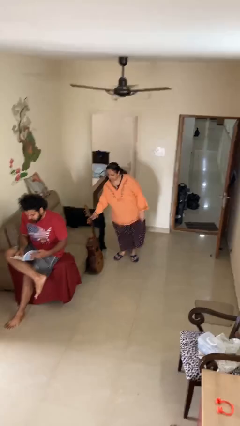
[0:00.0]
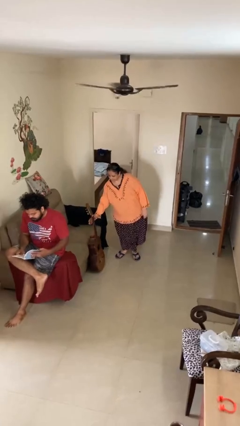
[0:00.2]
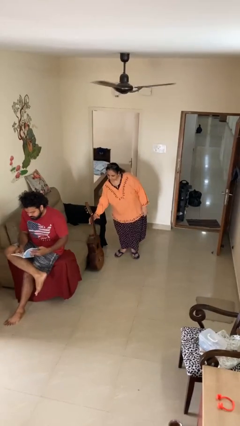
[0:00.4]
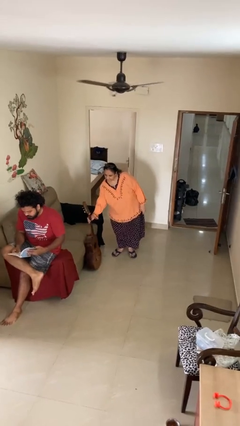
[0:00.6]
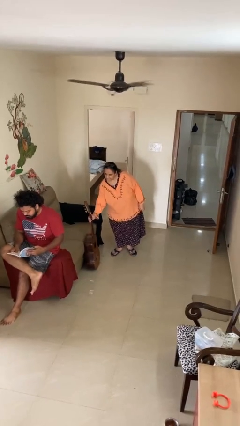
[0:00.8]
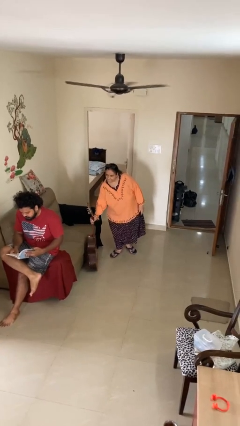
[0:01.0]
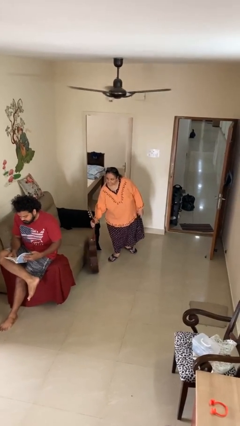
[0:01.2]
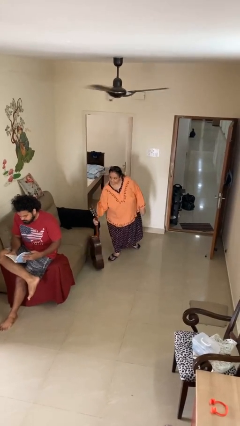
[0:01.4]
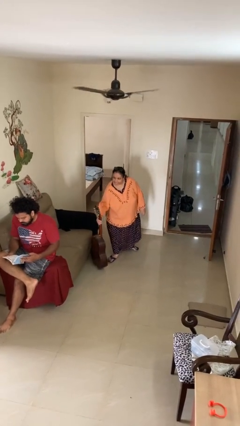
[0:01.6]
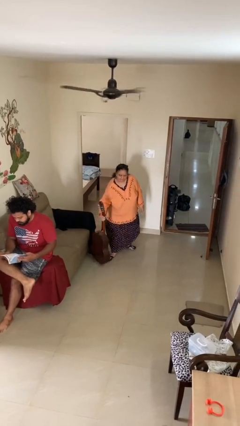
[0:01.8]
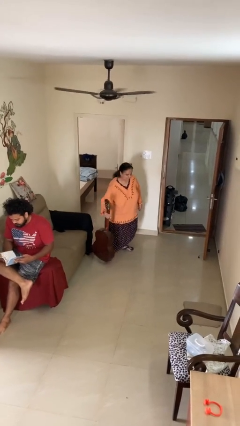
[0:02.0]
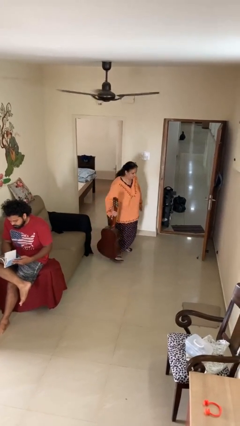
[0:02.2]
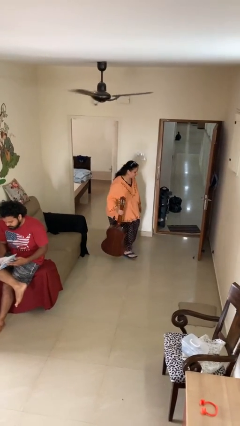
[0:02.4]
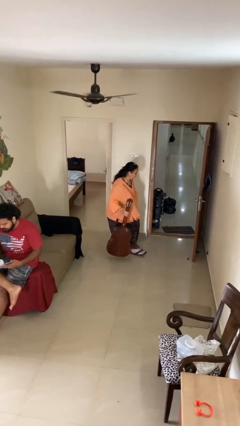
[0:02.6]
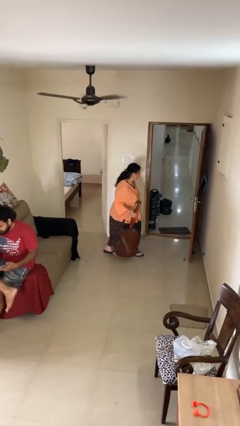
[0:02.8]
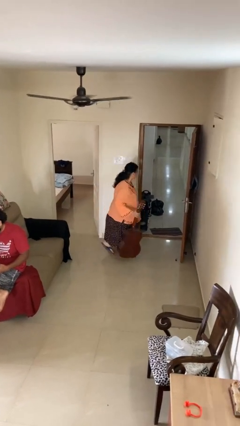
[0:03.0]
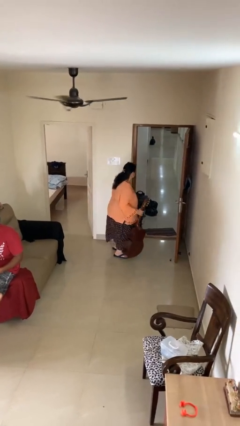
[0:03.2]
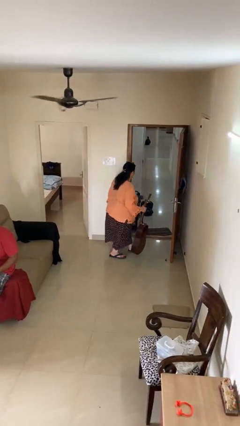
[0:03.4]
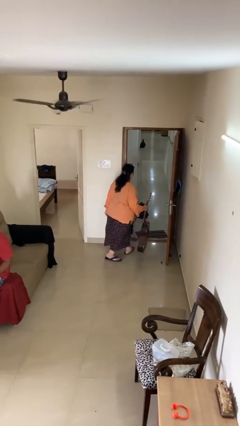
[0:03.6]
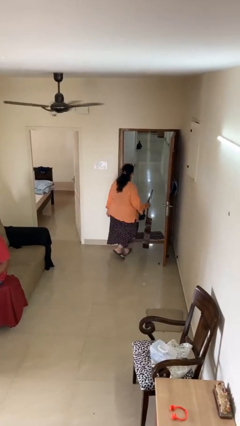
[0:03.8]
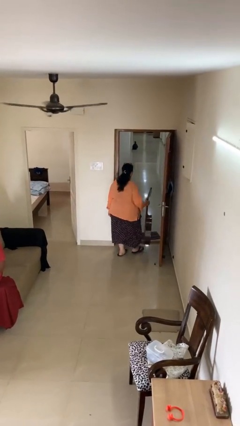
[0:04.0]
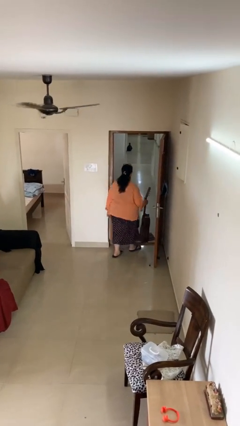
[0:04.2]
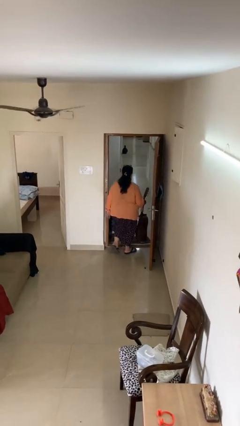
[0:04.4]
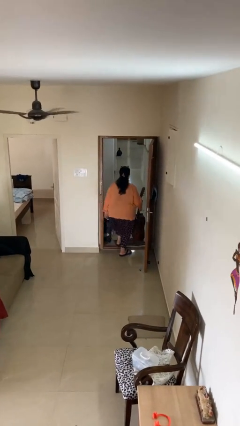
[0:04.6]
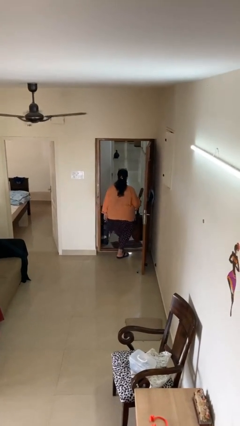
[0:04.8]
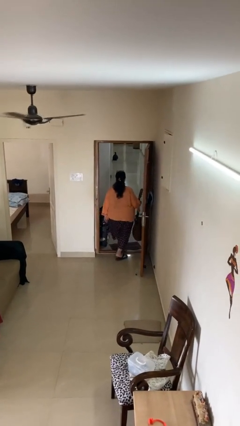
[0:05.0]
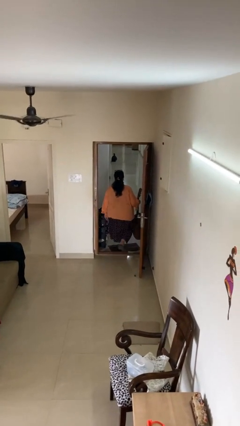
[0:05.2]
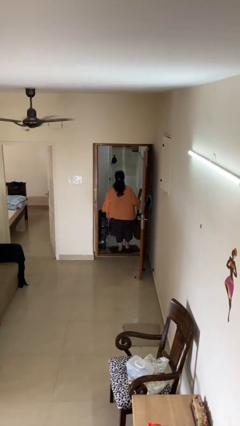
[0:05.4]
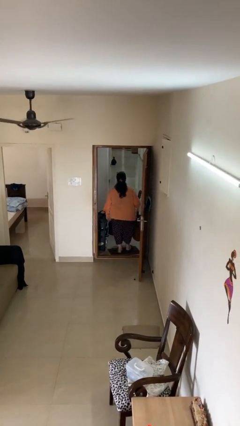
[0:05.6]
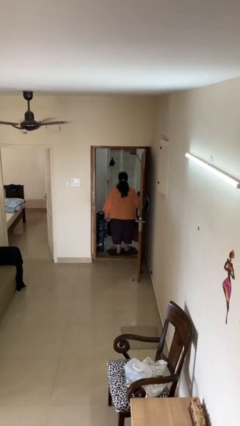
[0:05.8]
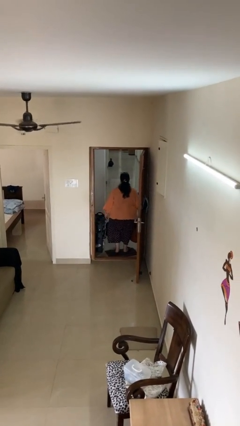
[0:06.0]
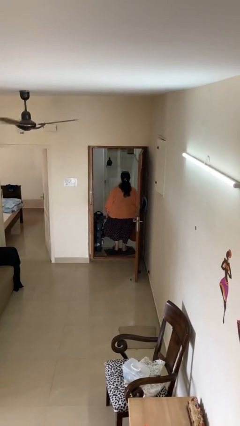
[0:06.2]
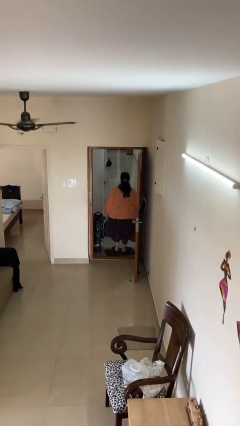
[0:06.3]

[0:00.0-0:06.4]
person steals object from person

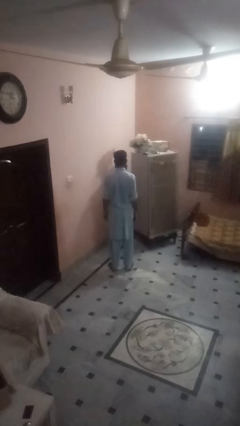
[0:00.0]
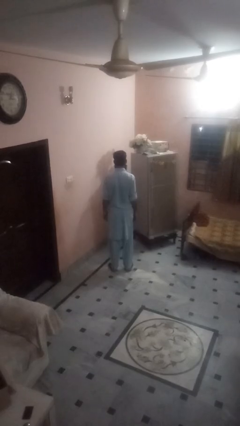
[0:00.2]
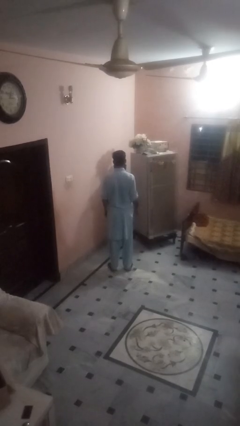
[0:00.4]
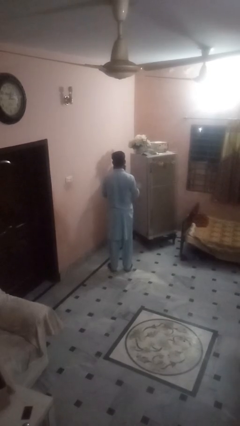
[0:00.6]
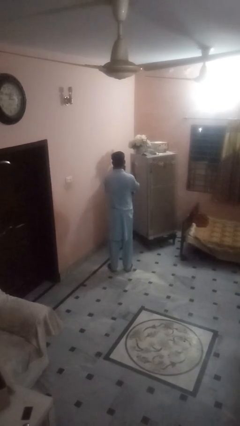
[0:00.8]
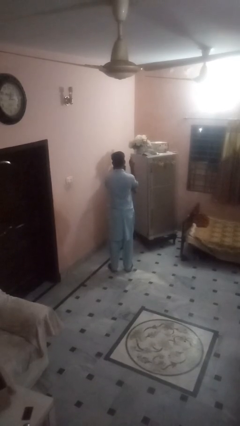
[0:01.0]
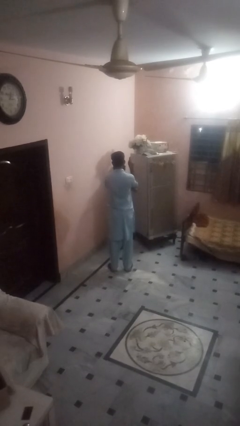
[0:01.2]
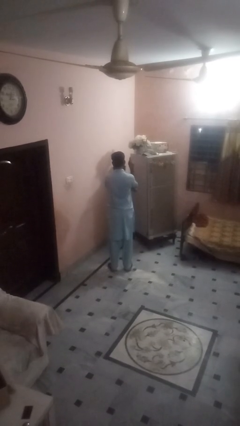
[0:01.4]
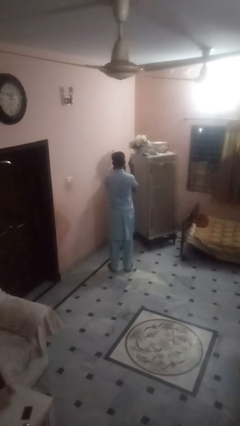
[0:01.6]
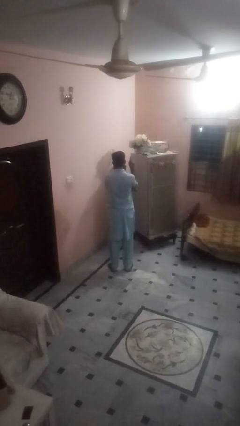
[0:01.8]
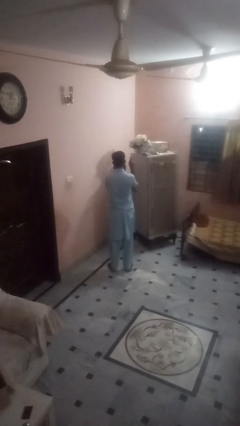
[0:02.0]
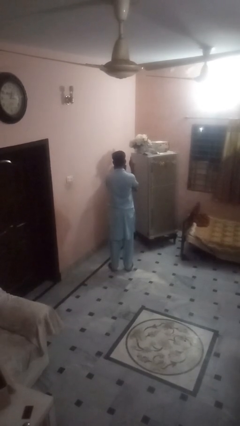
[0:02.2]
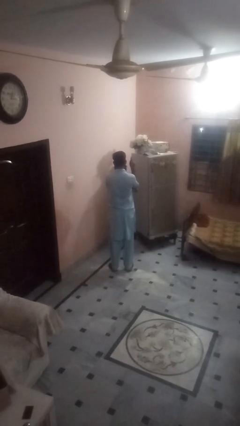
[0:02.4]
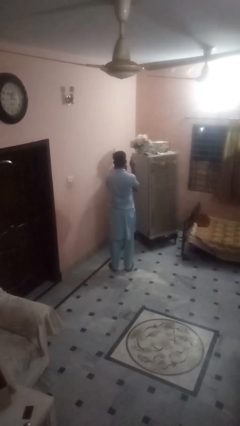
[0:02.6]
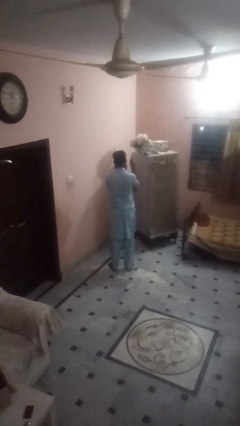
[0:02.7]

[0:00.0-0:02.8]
person gestures number one

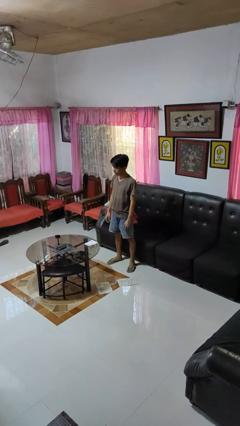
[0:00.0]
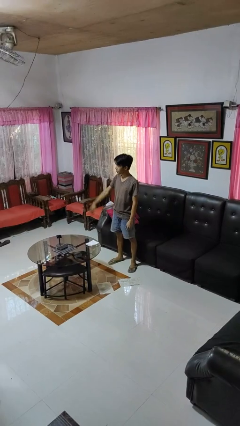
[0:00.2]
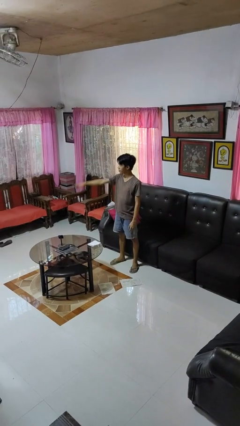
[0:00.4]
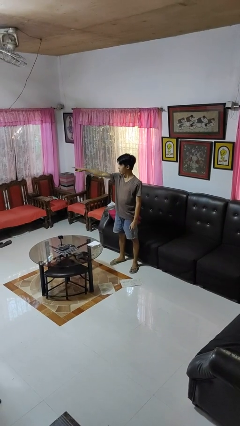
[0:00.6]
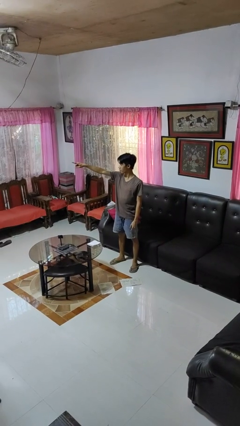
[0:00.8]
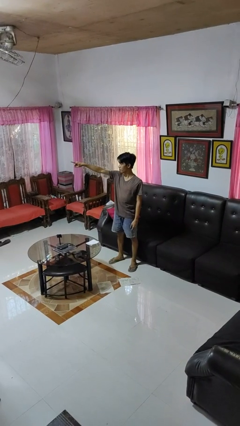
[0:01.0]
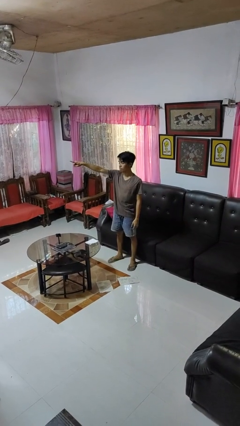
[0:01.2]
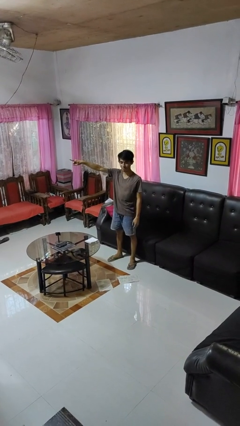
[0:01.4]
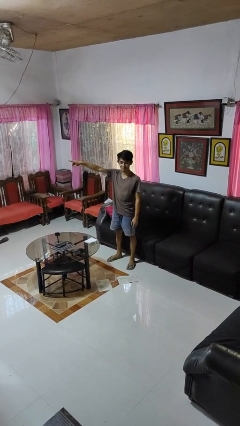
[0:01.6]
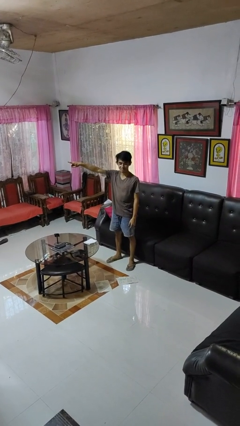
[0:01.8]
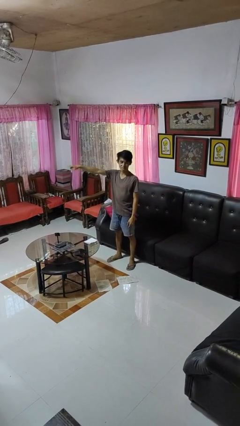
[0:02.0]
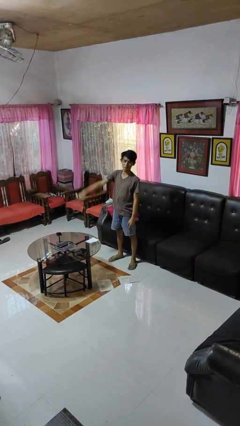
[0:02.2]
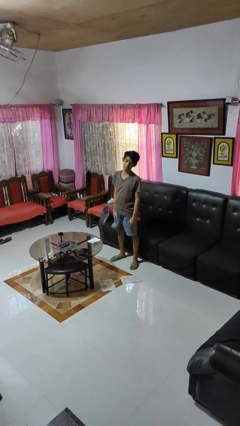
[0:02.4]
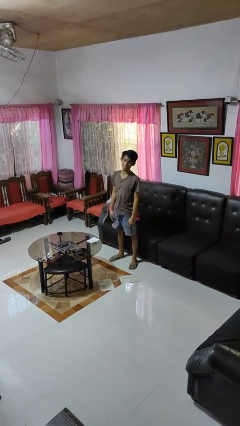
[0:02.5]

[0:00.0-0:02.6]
person points at person

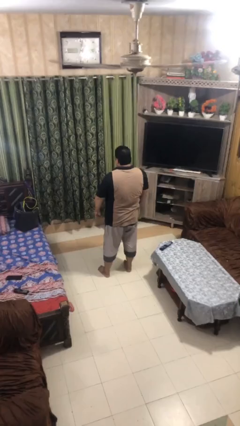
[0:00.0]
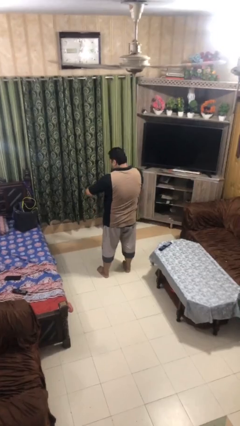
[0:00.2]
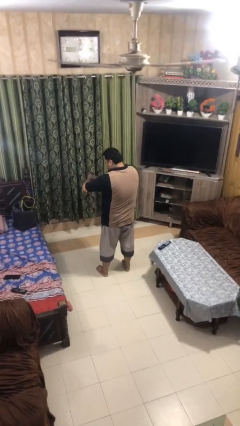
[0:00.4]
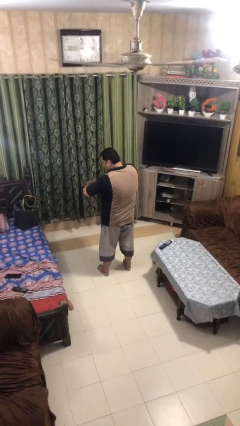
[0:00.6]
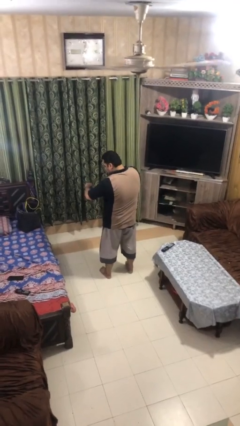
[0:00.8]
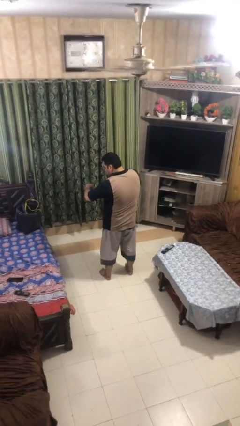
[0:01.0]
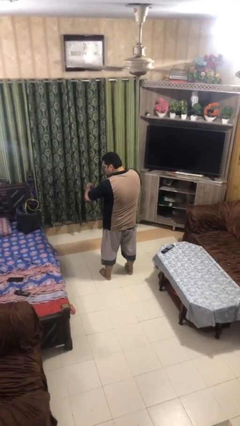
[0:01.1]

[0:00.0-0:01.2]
person swats bug

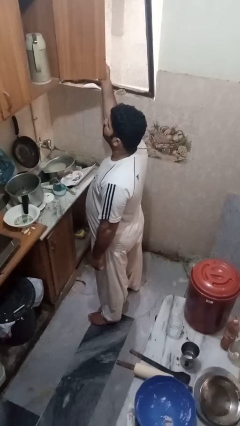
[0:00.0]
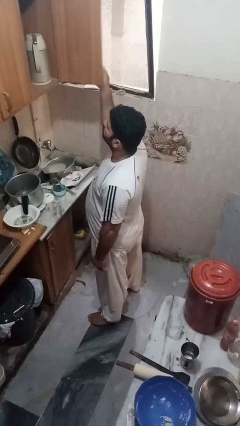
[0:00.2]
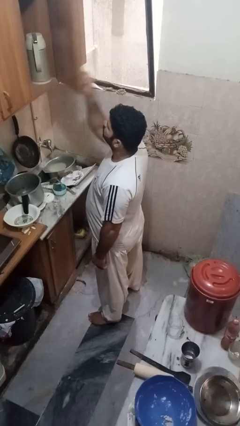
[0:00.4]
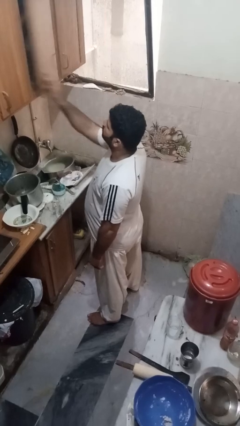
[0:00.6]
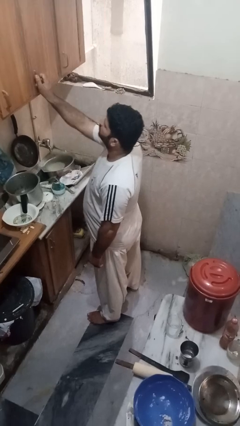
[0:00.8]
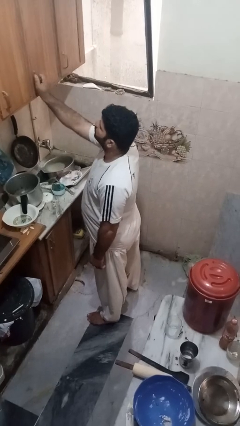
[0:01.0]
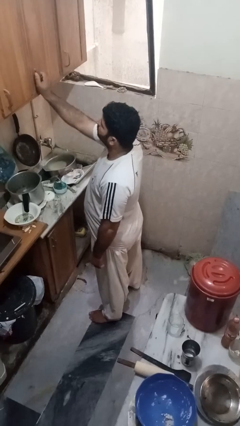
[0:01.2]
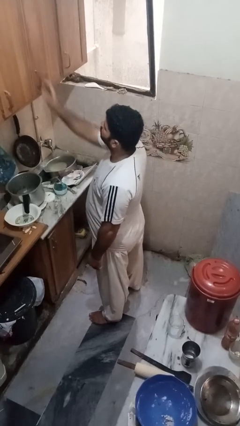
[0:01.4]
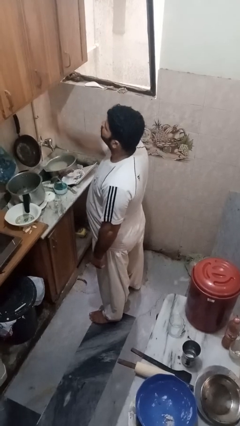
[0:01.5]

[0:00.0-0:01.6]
person closes cabinet

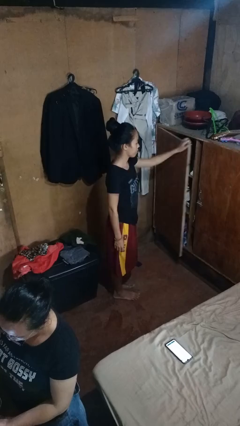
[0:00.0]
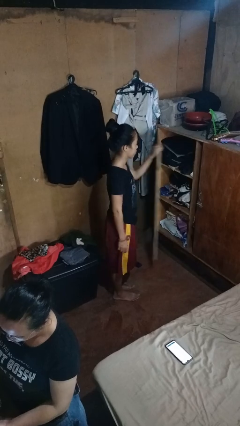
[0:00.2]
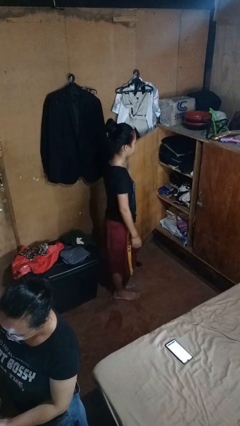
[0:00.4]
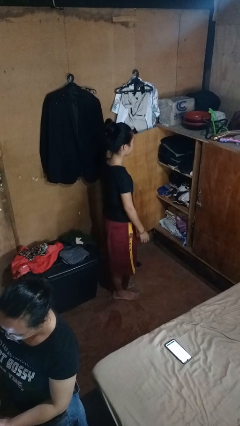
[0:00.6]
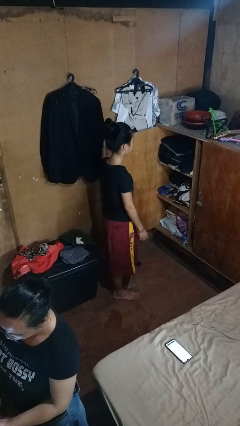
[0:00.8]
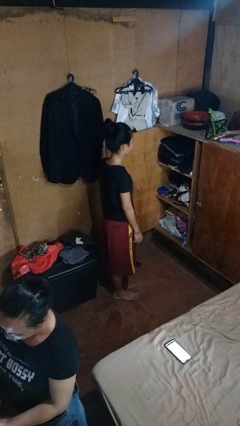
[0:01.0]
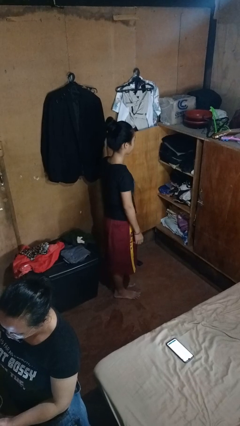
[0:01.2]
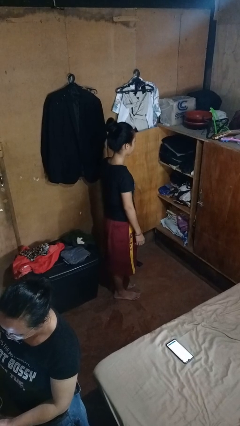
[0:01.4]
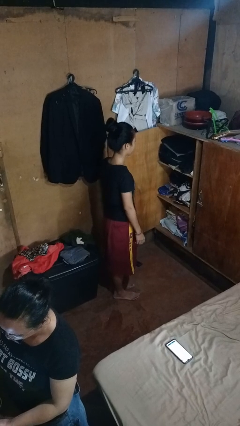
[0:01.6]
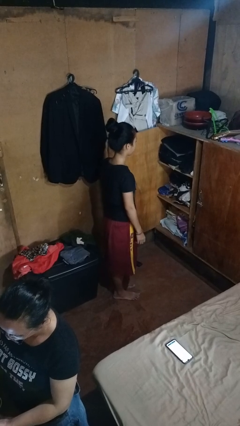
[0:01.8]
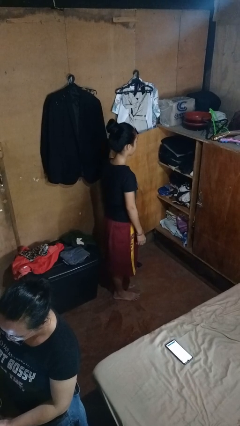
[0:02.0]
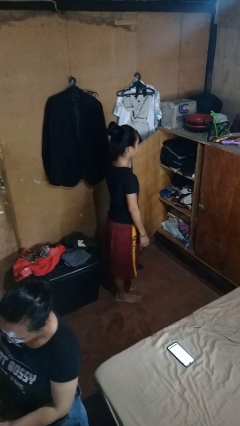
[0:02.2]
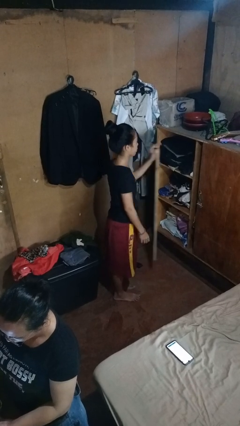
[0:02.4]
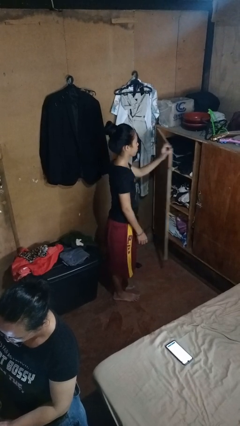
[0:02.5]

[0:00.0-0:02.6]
person opens closet door

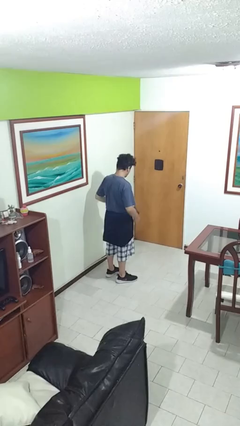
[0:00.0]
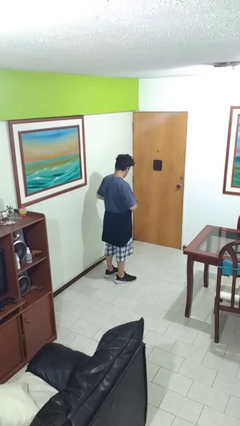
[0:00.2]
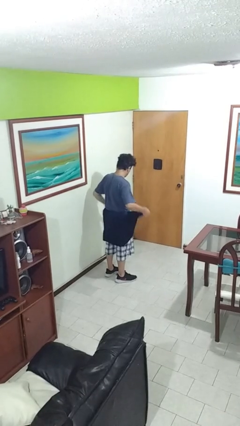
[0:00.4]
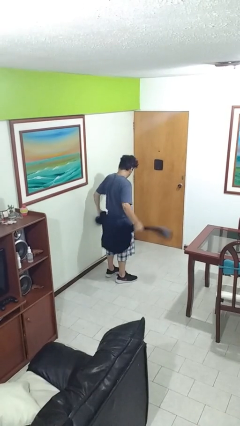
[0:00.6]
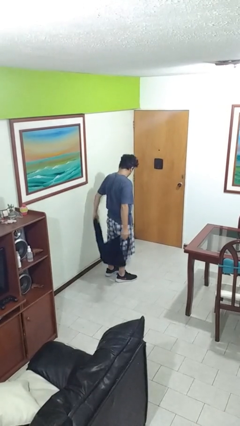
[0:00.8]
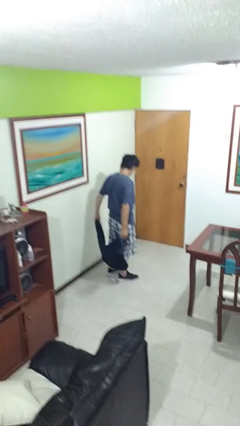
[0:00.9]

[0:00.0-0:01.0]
person unties jacket around waist
